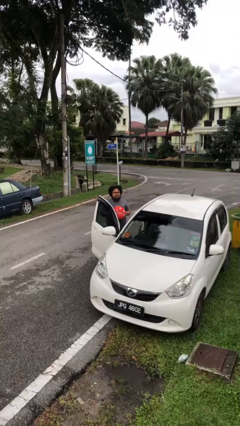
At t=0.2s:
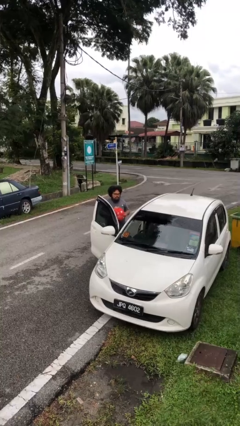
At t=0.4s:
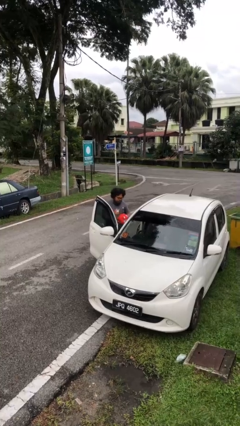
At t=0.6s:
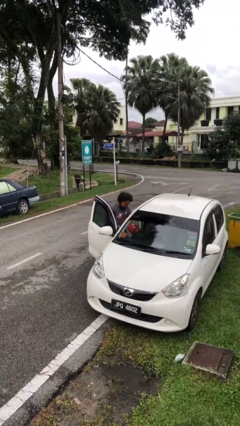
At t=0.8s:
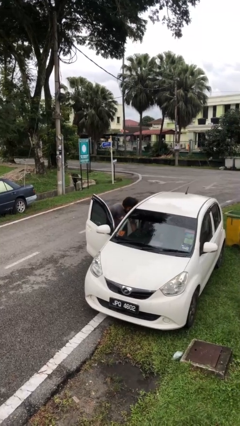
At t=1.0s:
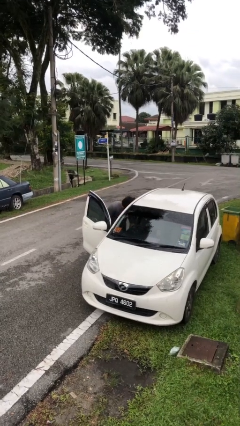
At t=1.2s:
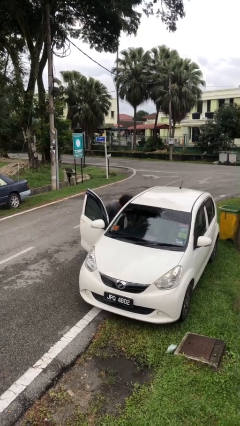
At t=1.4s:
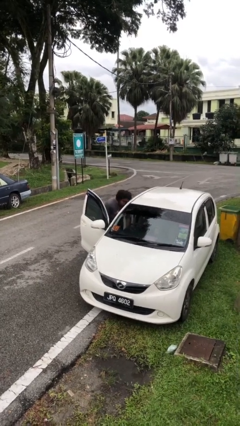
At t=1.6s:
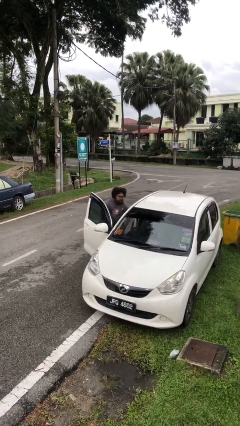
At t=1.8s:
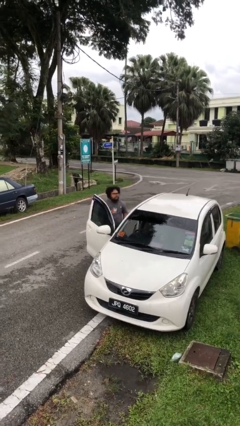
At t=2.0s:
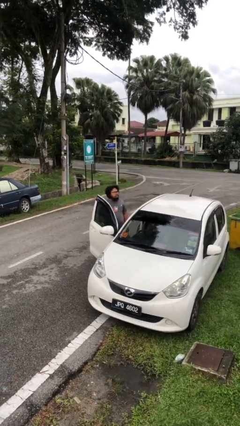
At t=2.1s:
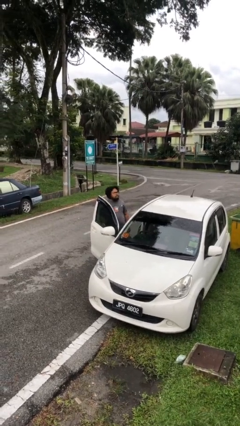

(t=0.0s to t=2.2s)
person loads car

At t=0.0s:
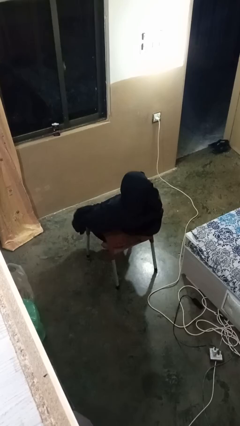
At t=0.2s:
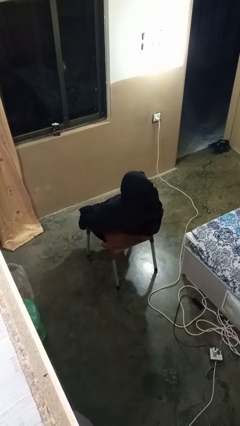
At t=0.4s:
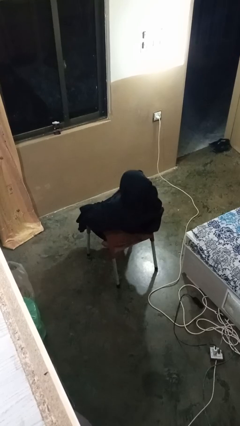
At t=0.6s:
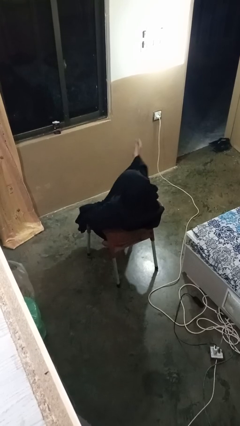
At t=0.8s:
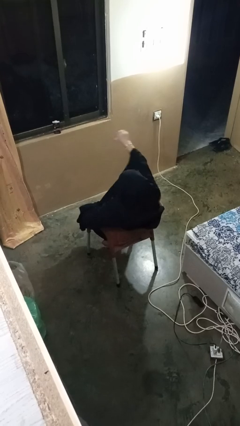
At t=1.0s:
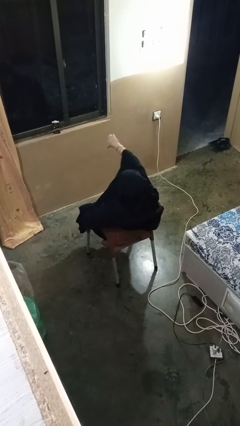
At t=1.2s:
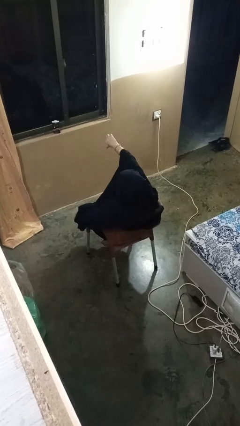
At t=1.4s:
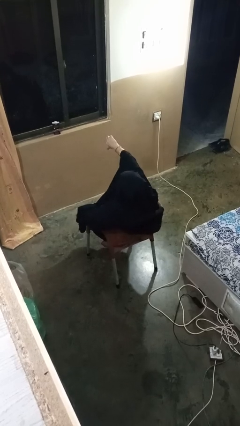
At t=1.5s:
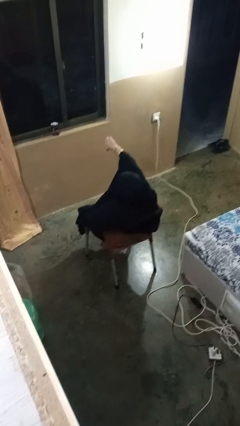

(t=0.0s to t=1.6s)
person gestures thumbs down

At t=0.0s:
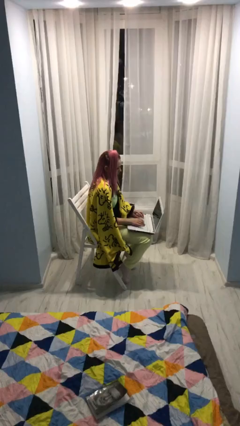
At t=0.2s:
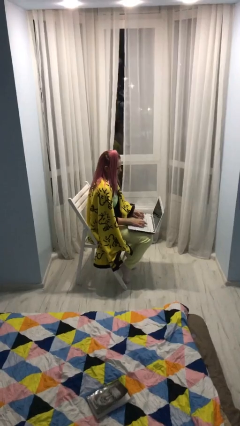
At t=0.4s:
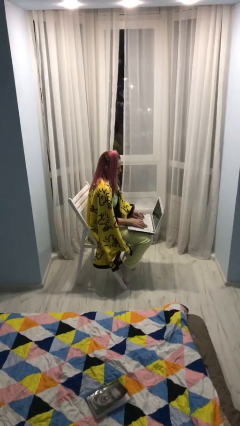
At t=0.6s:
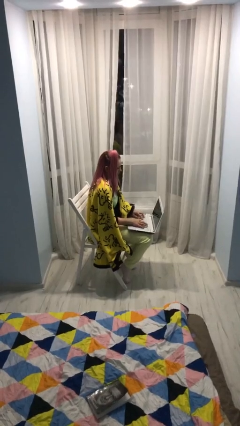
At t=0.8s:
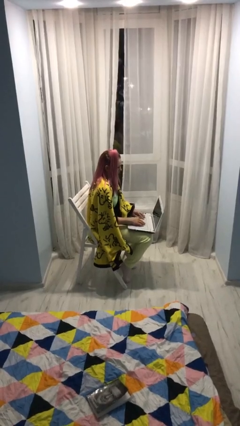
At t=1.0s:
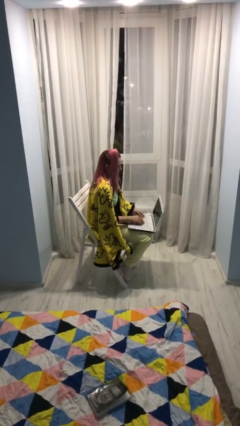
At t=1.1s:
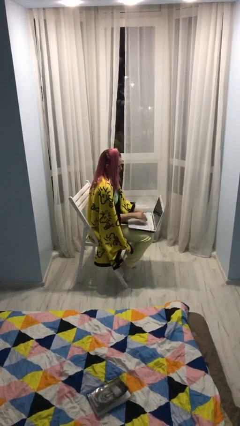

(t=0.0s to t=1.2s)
person interacts with laptop

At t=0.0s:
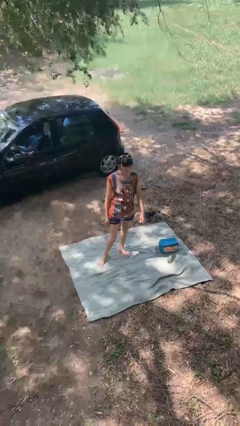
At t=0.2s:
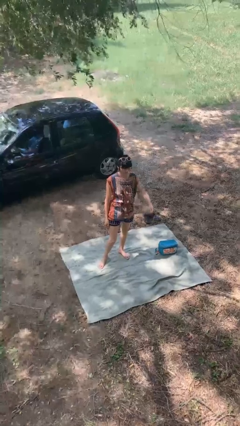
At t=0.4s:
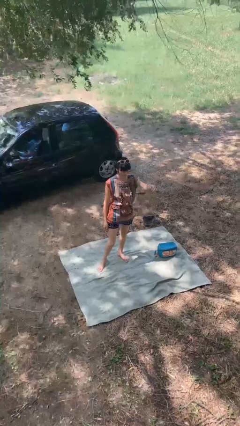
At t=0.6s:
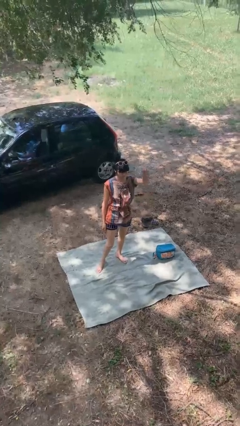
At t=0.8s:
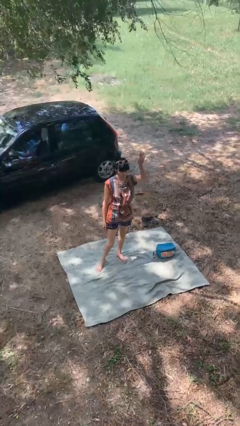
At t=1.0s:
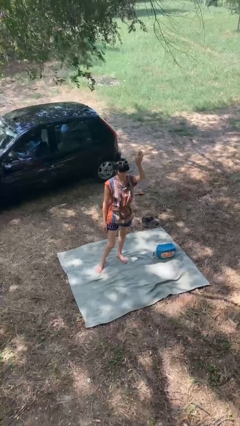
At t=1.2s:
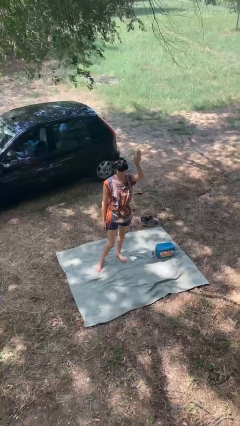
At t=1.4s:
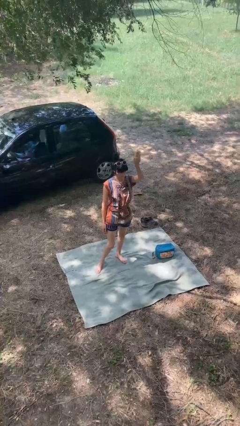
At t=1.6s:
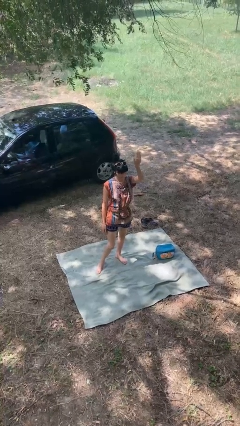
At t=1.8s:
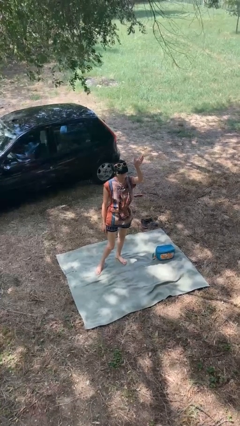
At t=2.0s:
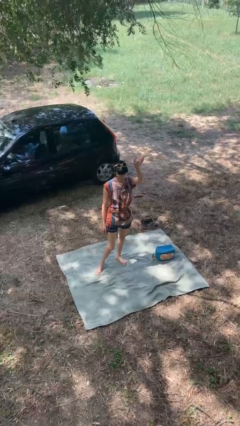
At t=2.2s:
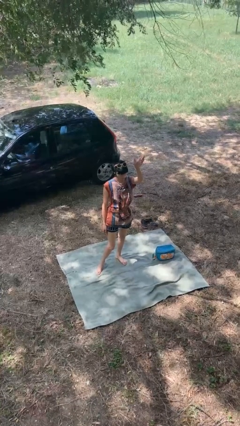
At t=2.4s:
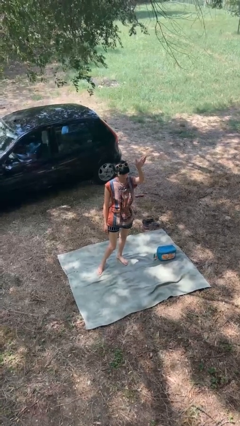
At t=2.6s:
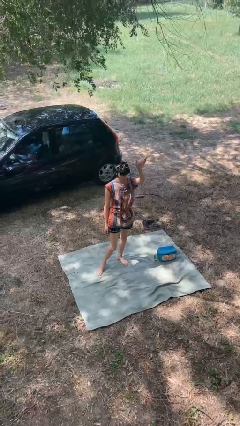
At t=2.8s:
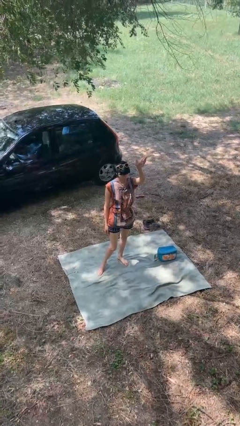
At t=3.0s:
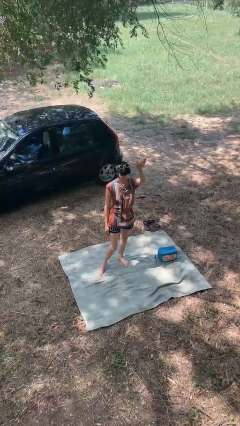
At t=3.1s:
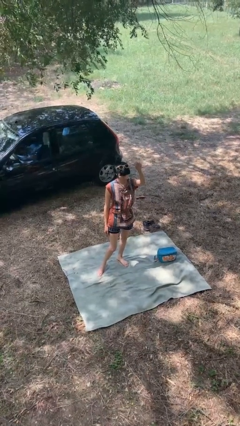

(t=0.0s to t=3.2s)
person gestures raise hand

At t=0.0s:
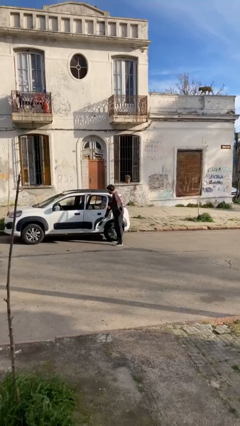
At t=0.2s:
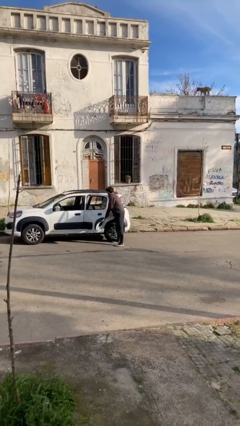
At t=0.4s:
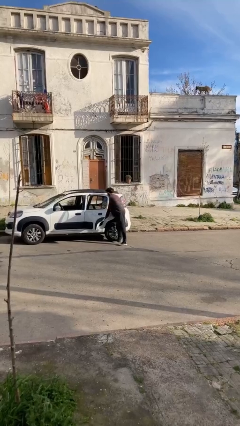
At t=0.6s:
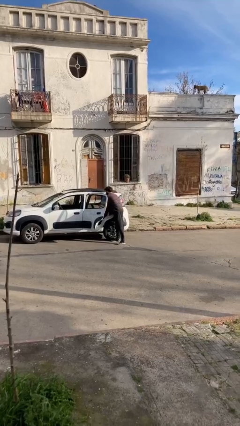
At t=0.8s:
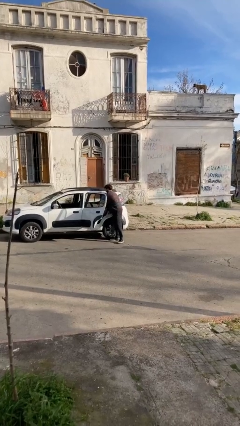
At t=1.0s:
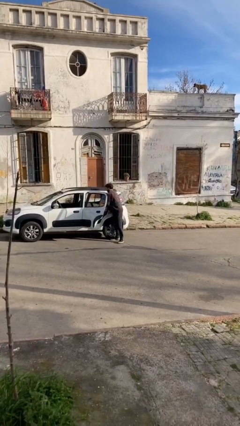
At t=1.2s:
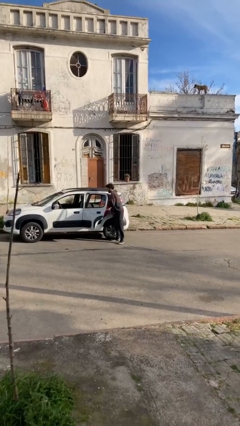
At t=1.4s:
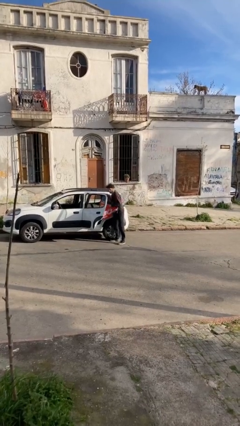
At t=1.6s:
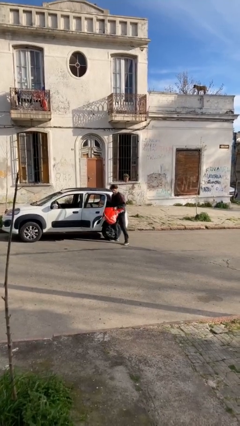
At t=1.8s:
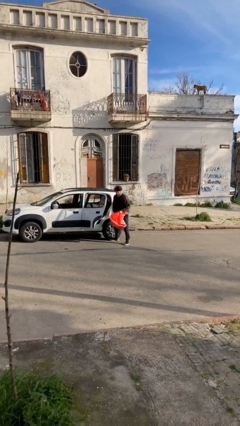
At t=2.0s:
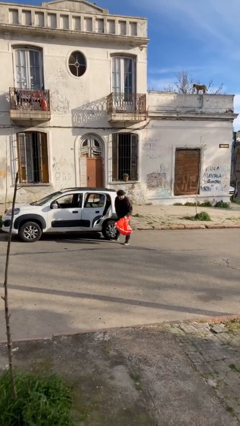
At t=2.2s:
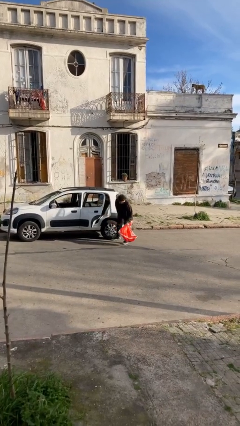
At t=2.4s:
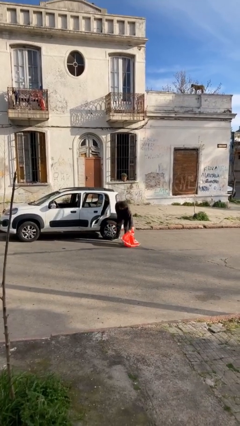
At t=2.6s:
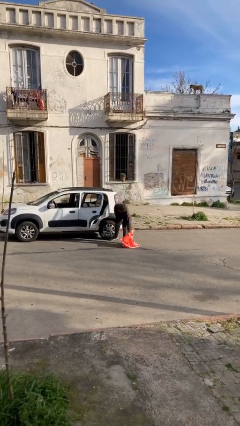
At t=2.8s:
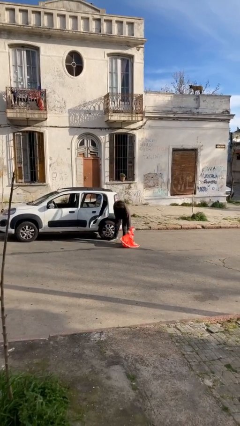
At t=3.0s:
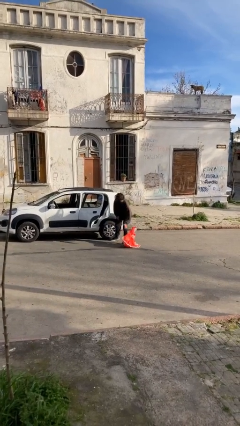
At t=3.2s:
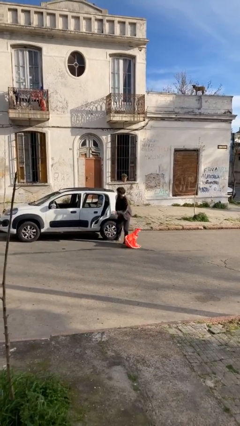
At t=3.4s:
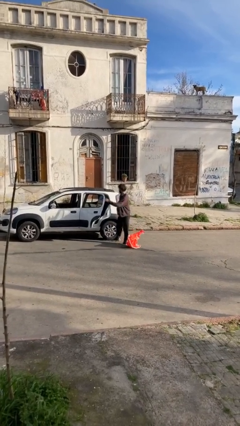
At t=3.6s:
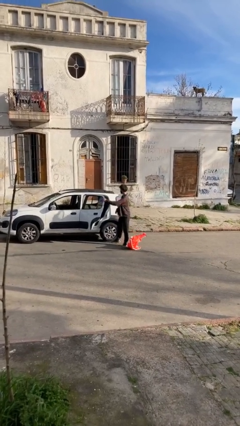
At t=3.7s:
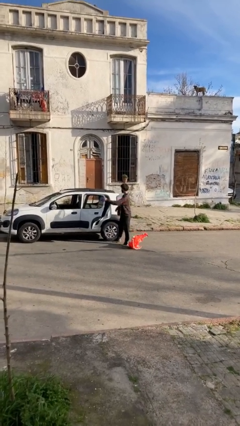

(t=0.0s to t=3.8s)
person unloads car

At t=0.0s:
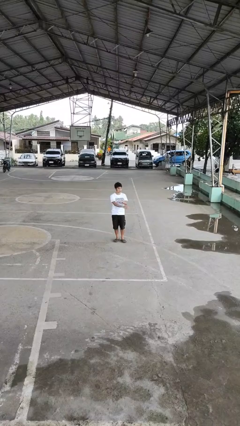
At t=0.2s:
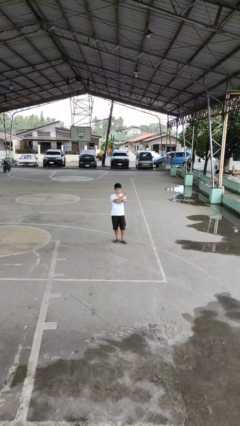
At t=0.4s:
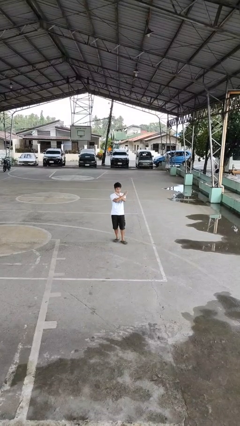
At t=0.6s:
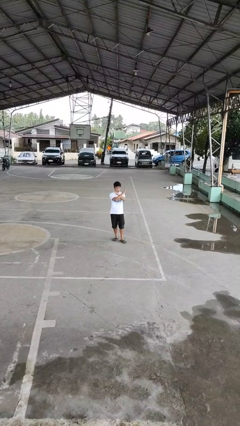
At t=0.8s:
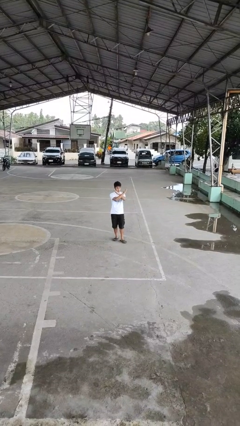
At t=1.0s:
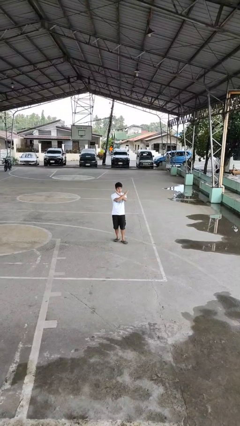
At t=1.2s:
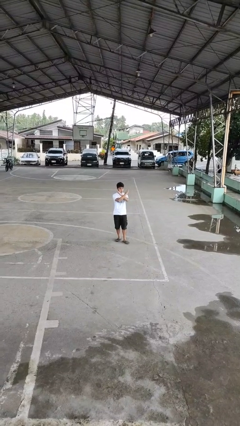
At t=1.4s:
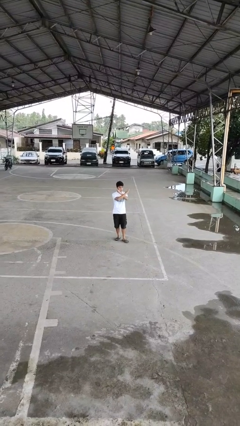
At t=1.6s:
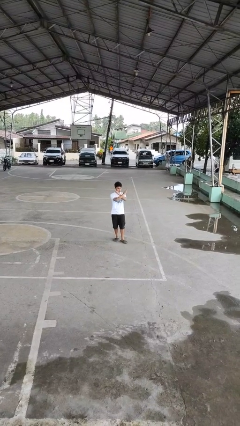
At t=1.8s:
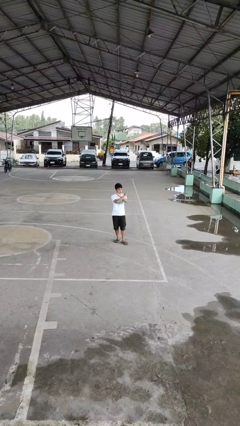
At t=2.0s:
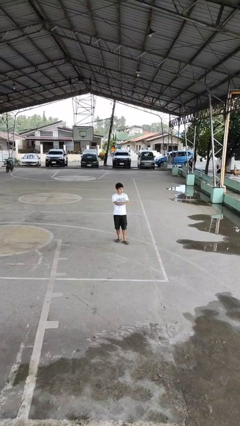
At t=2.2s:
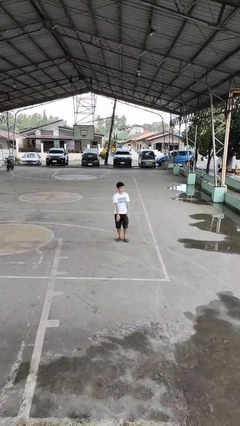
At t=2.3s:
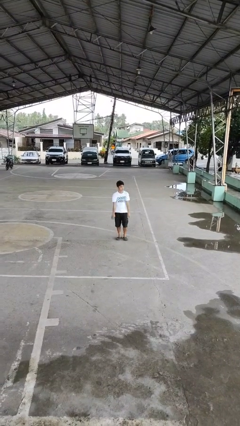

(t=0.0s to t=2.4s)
person gestures arms x

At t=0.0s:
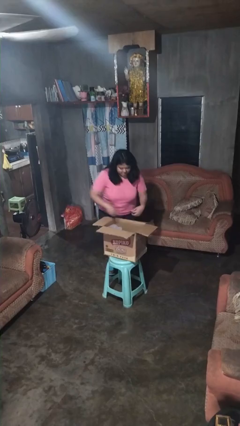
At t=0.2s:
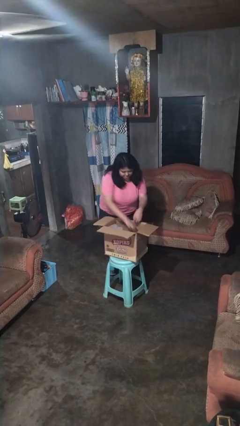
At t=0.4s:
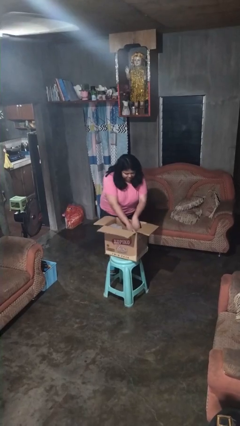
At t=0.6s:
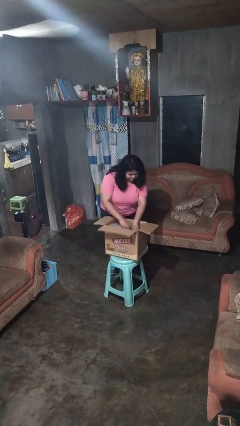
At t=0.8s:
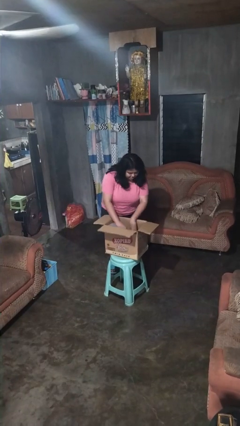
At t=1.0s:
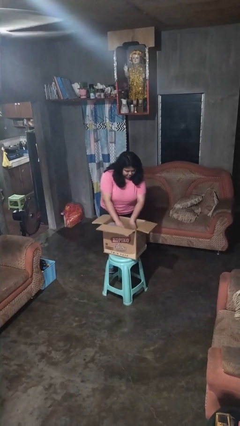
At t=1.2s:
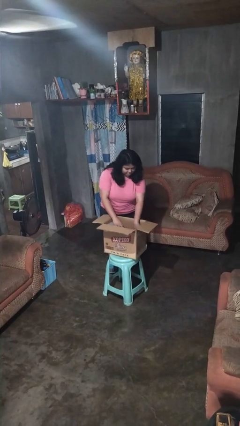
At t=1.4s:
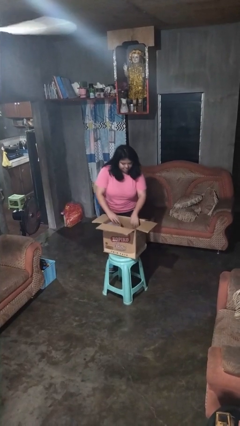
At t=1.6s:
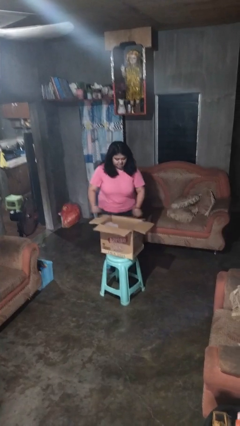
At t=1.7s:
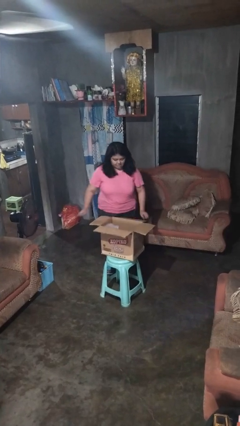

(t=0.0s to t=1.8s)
person searches in box

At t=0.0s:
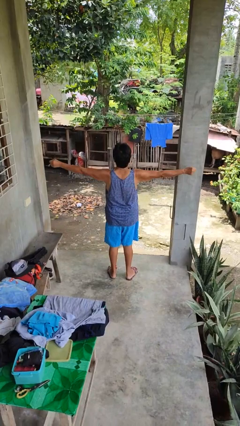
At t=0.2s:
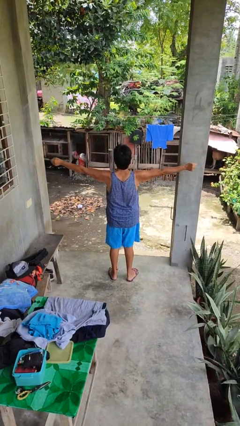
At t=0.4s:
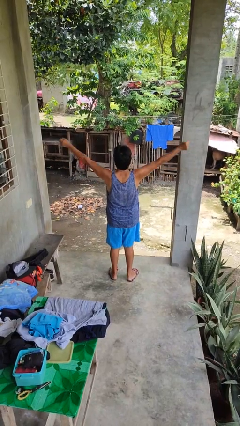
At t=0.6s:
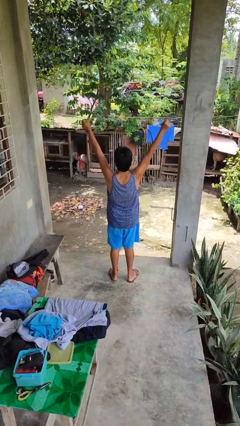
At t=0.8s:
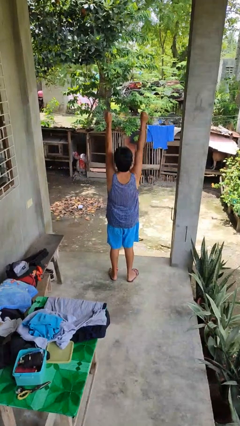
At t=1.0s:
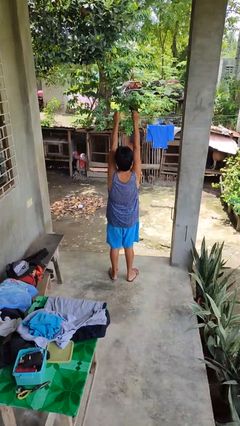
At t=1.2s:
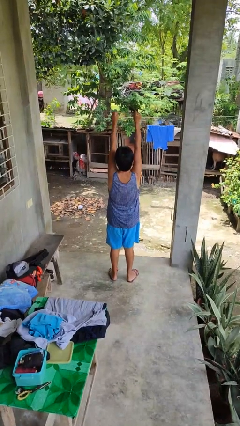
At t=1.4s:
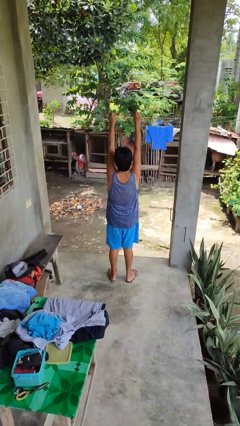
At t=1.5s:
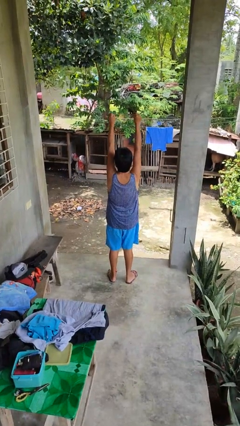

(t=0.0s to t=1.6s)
person stretches arms over head
